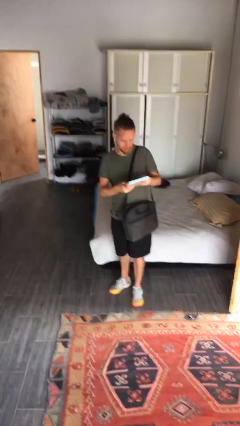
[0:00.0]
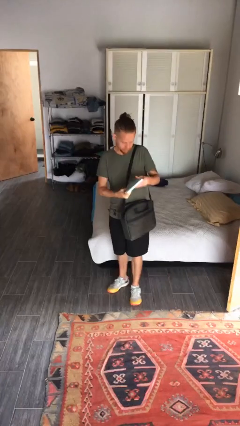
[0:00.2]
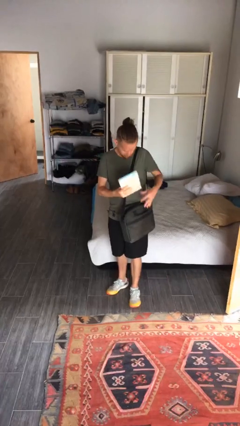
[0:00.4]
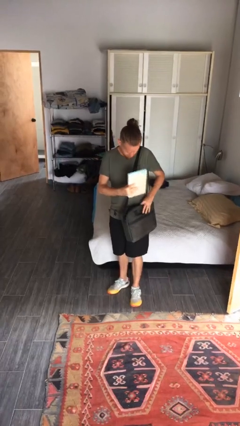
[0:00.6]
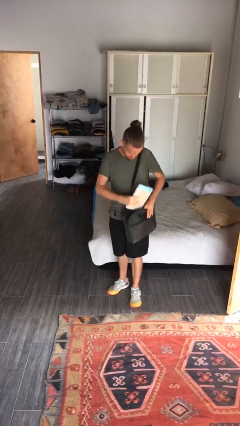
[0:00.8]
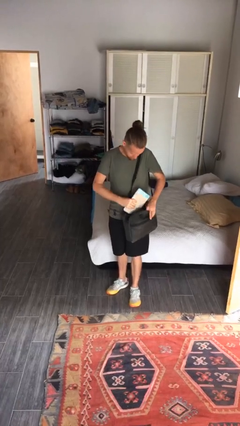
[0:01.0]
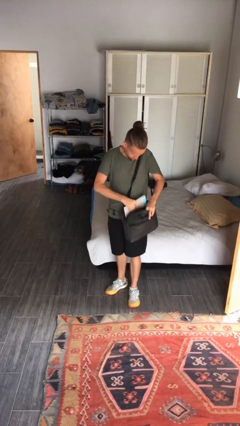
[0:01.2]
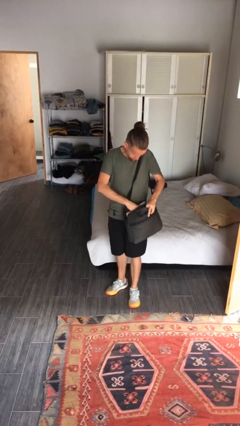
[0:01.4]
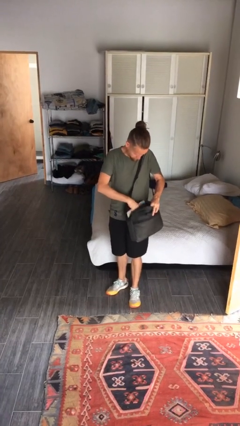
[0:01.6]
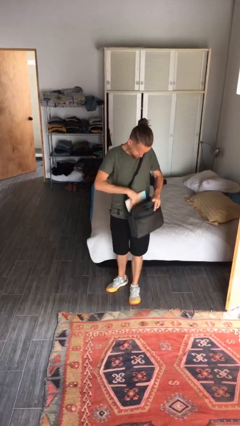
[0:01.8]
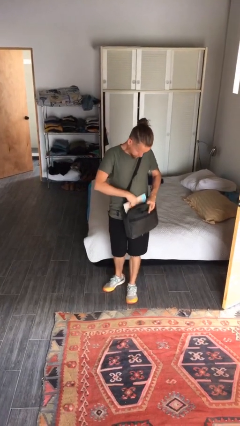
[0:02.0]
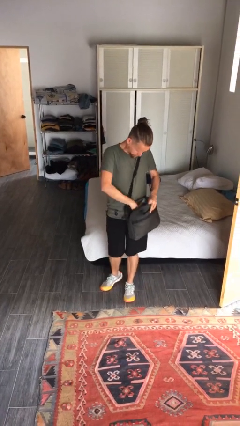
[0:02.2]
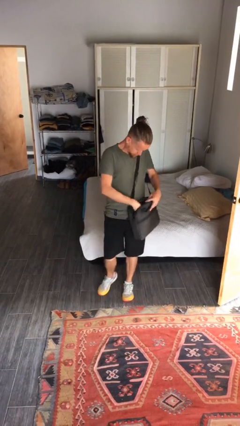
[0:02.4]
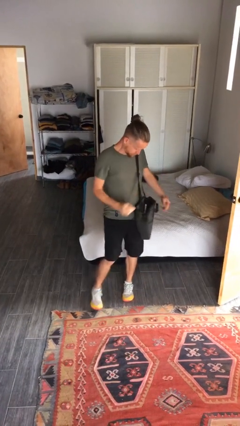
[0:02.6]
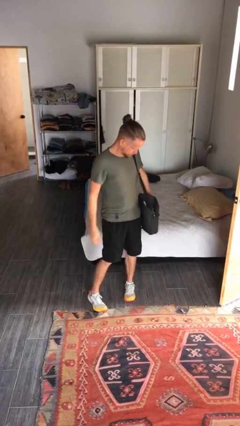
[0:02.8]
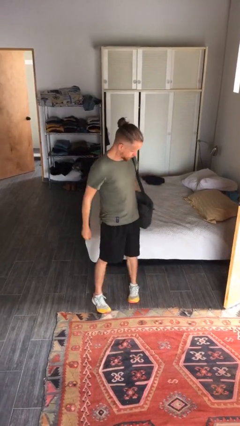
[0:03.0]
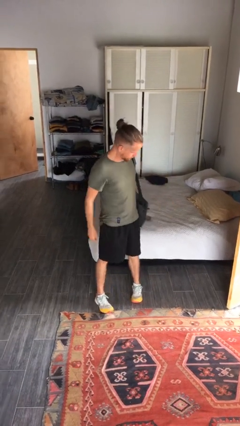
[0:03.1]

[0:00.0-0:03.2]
person puts object into purse

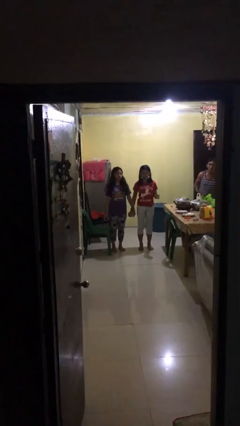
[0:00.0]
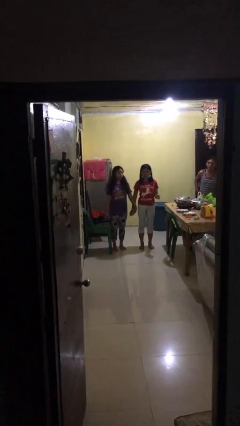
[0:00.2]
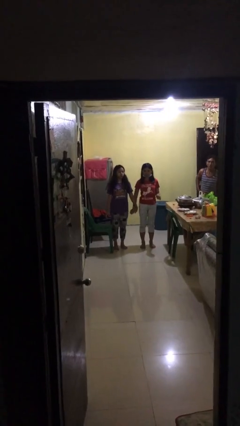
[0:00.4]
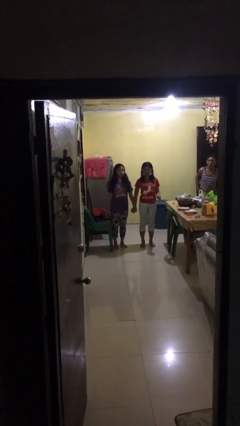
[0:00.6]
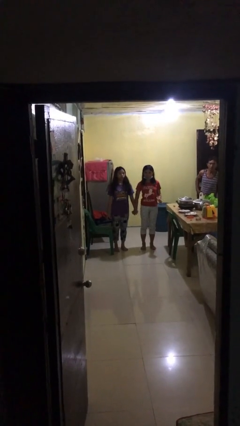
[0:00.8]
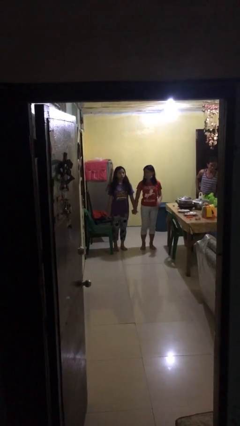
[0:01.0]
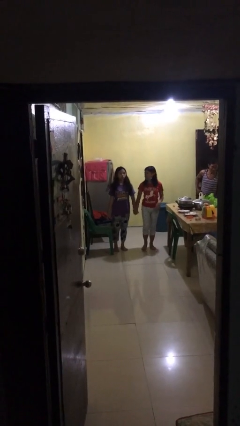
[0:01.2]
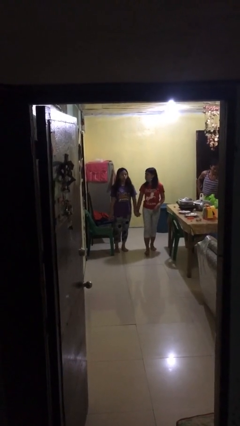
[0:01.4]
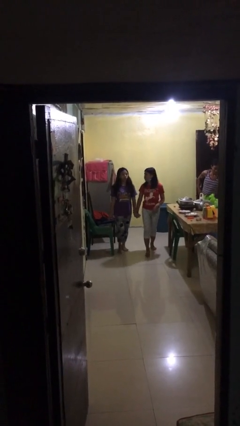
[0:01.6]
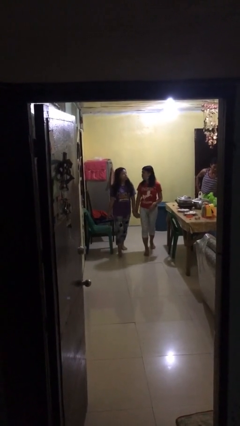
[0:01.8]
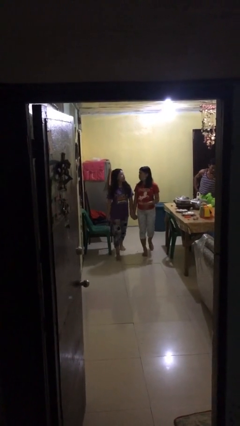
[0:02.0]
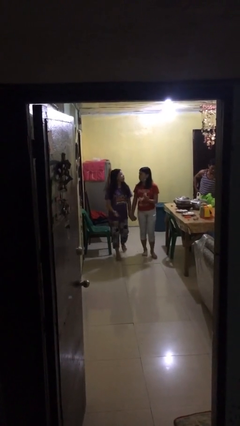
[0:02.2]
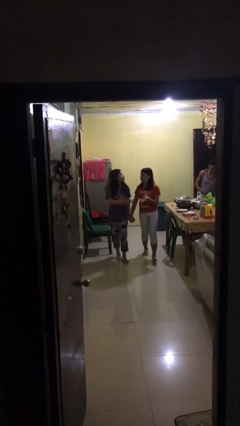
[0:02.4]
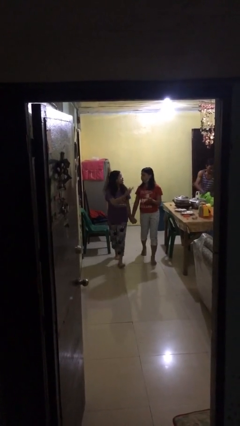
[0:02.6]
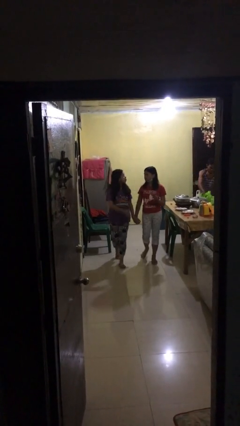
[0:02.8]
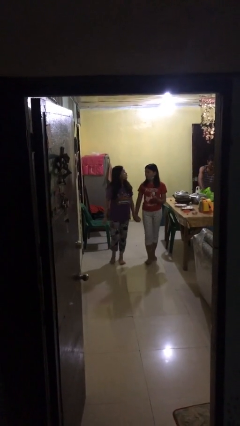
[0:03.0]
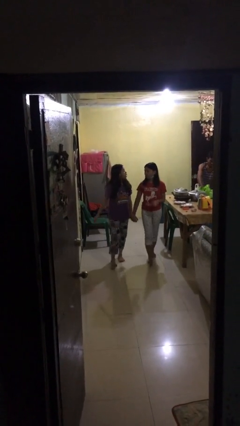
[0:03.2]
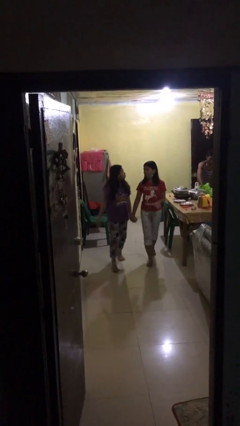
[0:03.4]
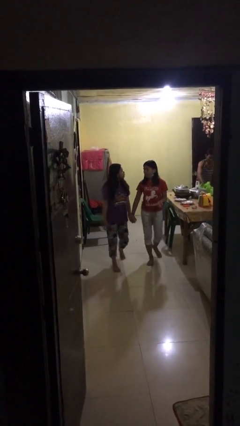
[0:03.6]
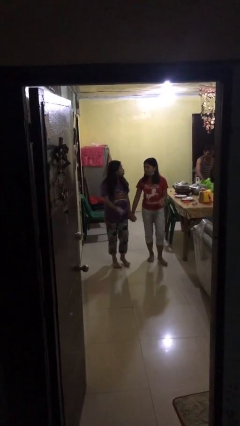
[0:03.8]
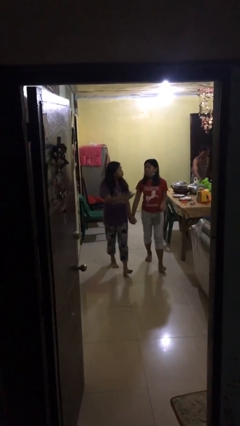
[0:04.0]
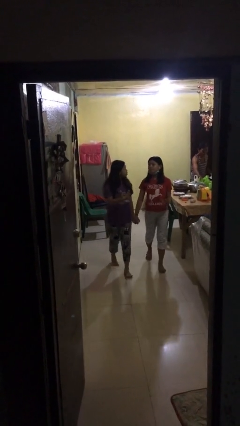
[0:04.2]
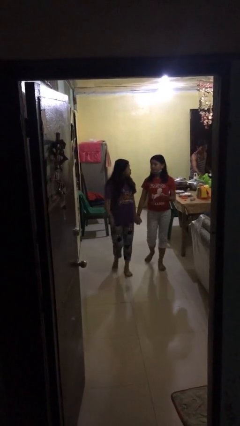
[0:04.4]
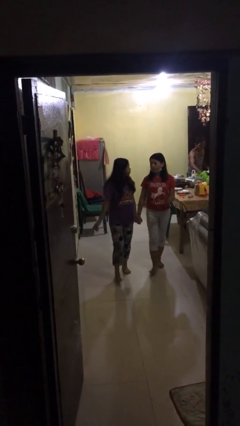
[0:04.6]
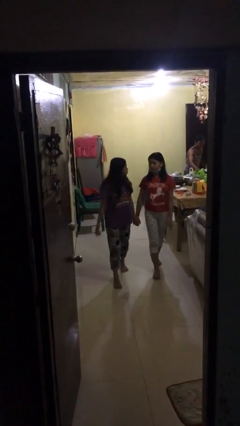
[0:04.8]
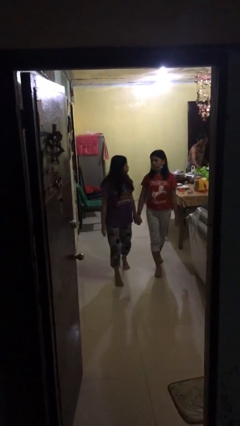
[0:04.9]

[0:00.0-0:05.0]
person holds hand

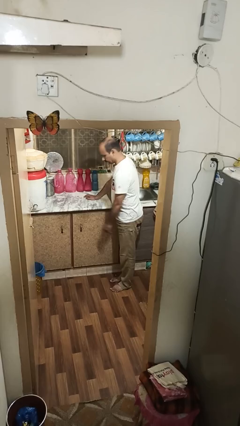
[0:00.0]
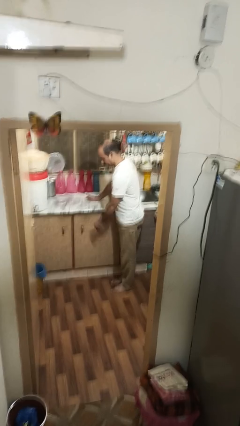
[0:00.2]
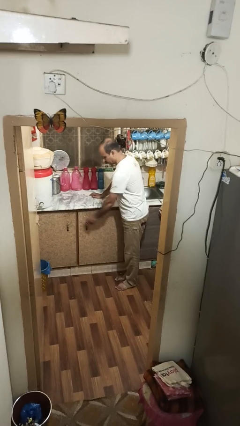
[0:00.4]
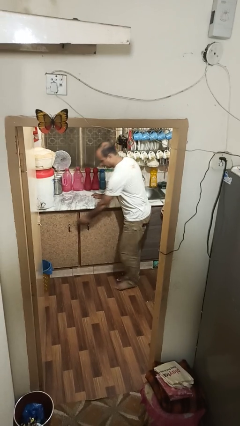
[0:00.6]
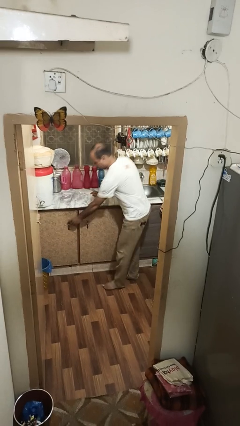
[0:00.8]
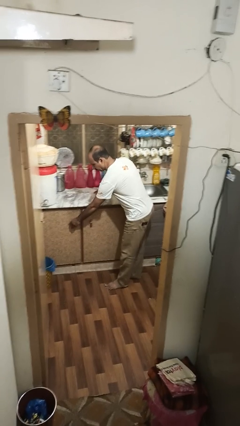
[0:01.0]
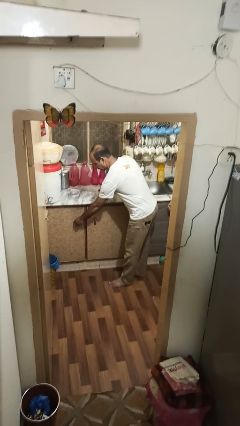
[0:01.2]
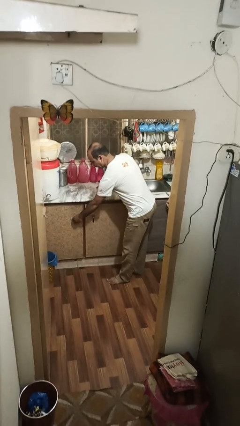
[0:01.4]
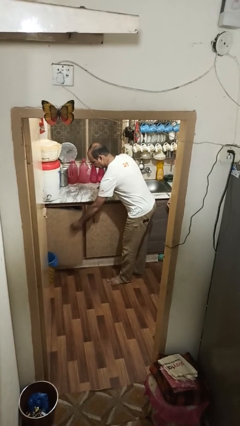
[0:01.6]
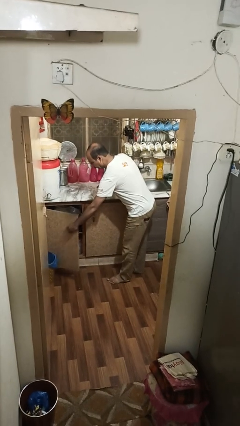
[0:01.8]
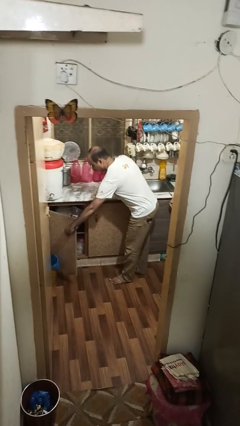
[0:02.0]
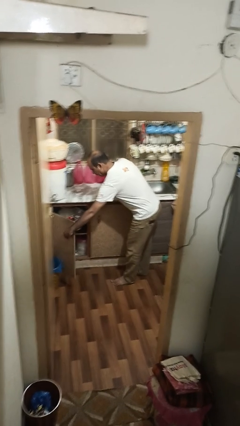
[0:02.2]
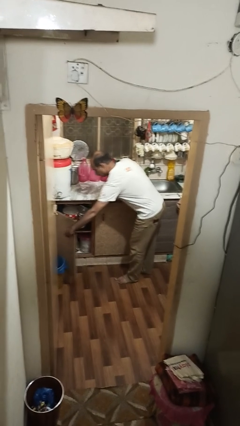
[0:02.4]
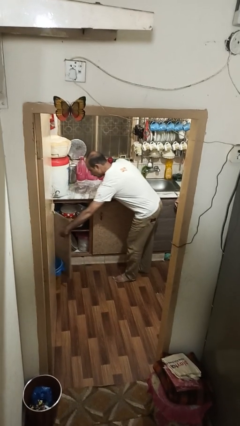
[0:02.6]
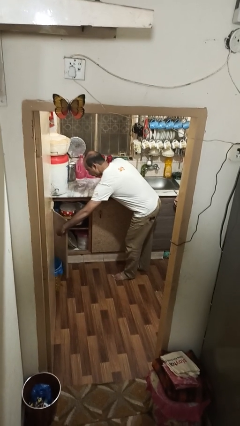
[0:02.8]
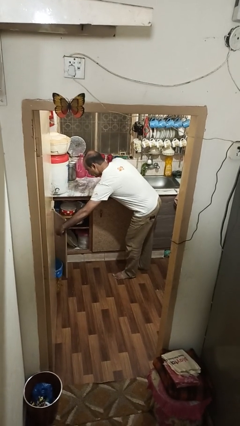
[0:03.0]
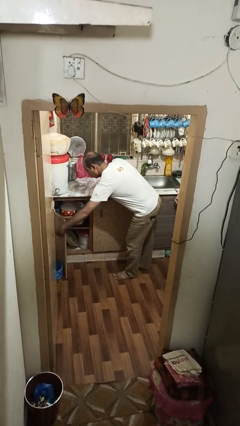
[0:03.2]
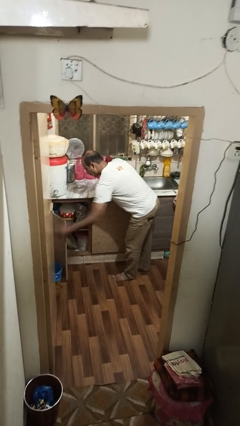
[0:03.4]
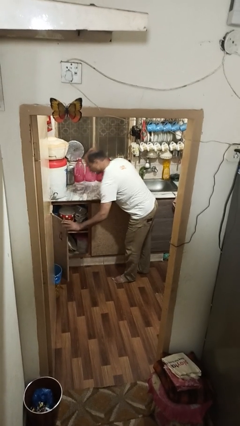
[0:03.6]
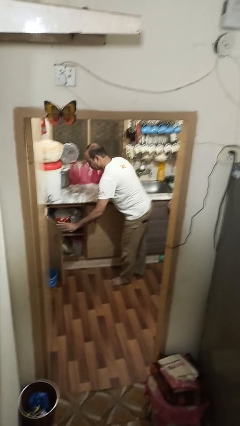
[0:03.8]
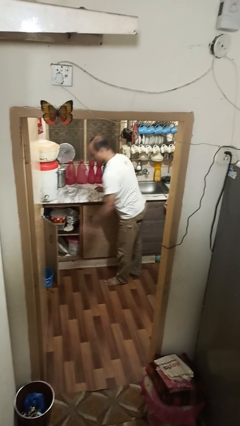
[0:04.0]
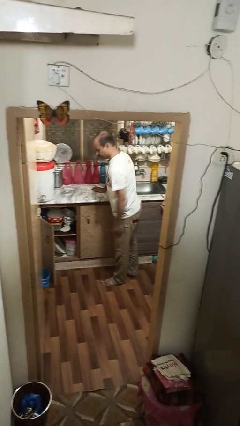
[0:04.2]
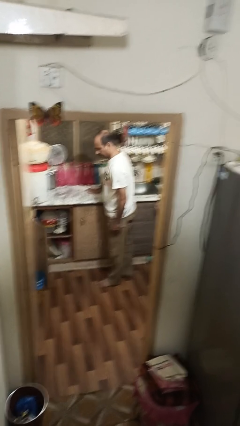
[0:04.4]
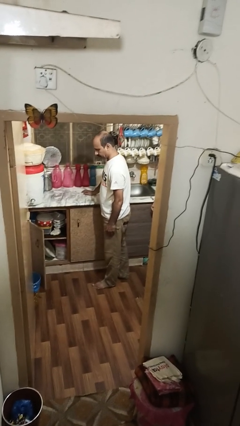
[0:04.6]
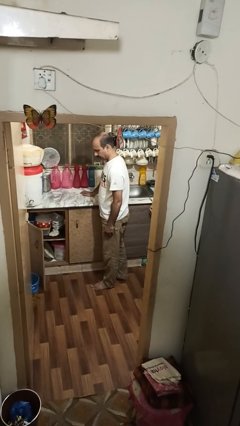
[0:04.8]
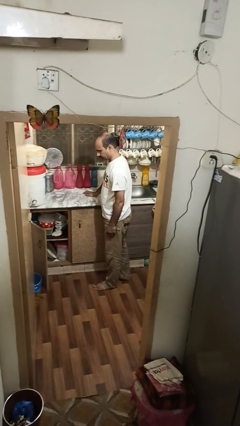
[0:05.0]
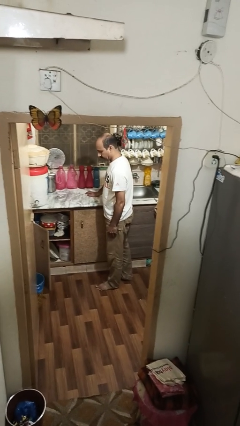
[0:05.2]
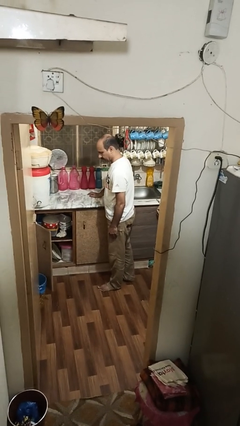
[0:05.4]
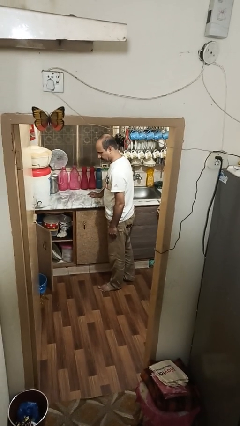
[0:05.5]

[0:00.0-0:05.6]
person opens cabinet

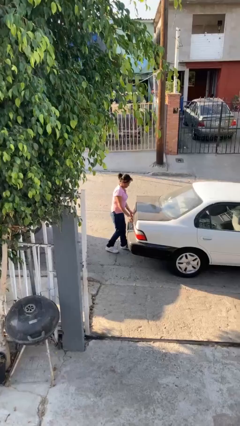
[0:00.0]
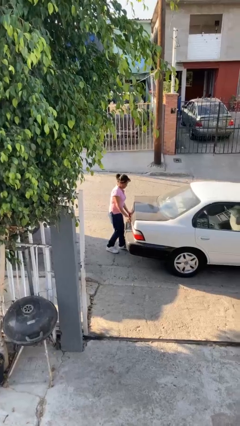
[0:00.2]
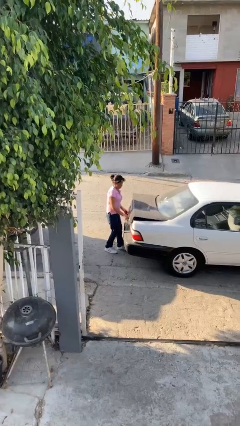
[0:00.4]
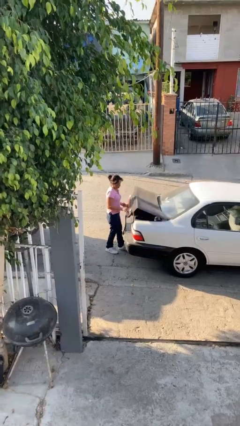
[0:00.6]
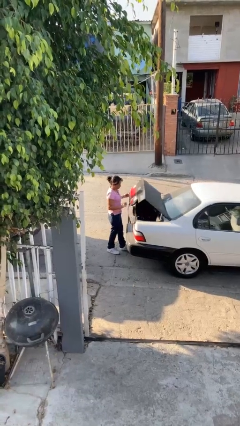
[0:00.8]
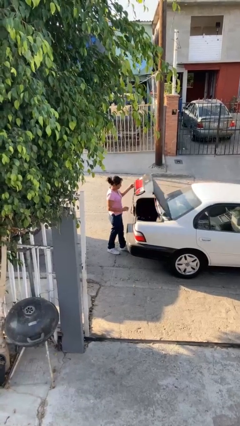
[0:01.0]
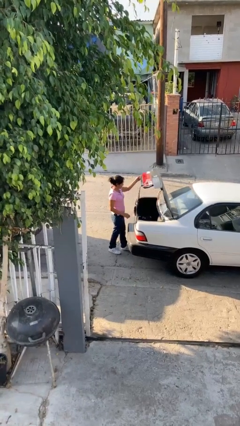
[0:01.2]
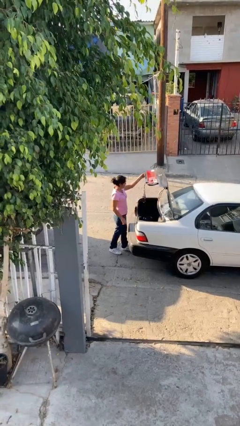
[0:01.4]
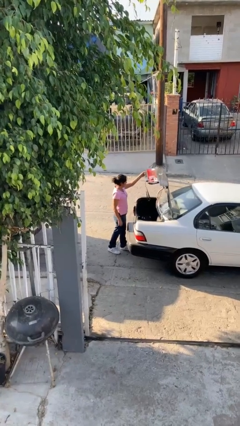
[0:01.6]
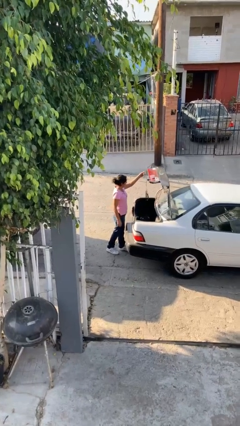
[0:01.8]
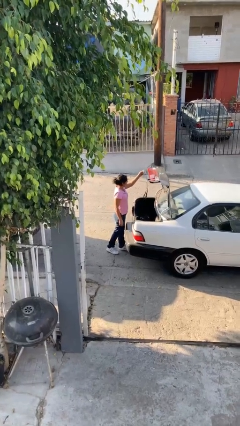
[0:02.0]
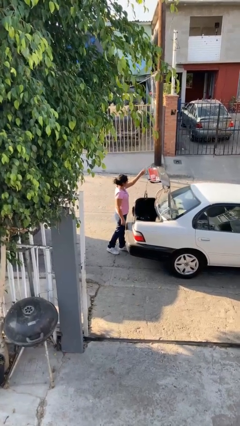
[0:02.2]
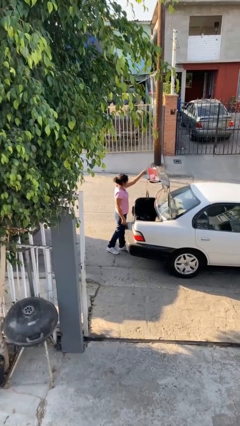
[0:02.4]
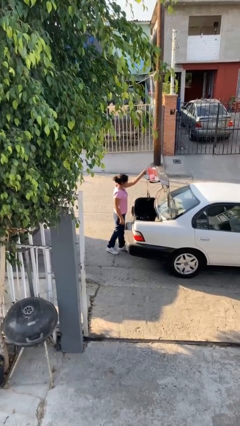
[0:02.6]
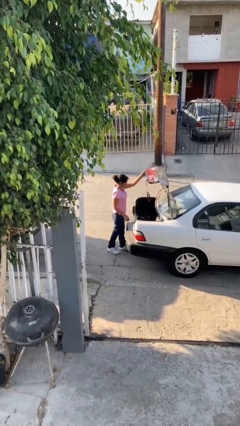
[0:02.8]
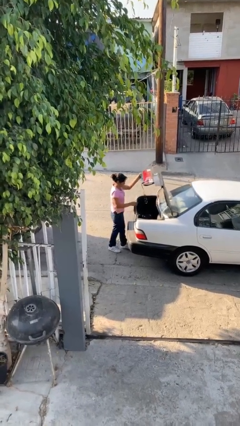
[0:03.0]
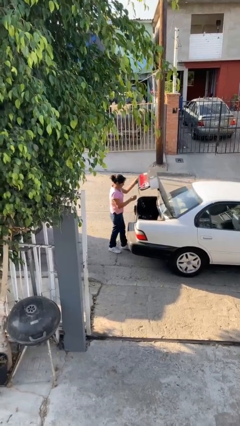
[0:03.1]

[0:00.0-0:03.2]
person opens car trunk
